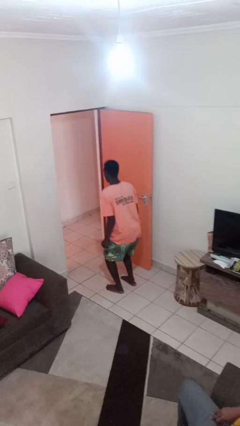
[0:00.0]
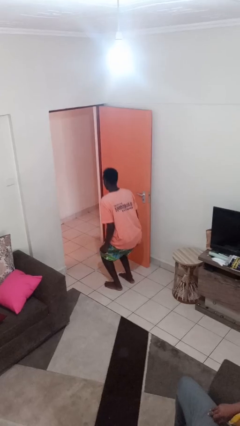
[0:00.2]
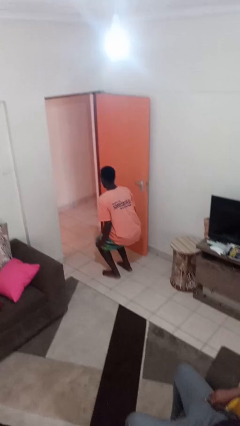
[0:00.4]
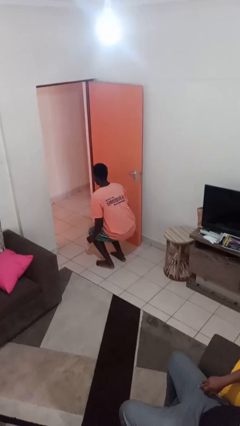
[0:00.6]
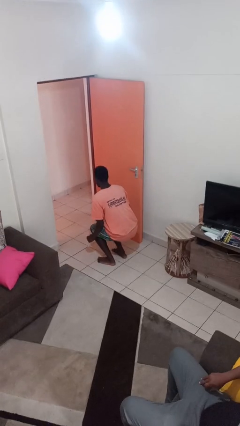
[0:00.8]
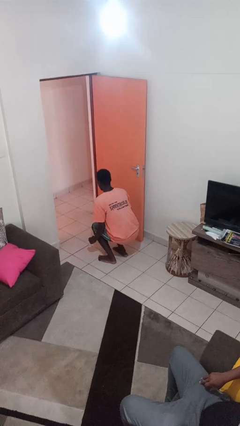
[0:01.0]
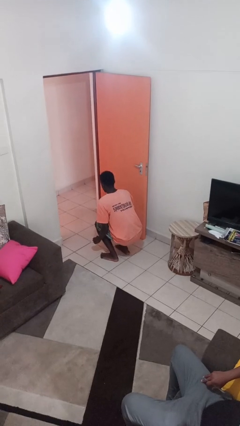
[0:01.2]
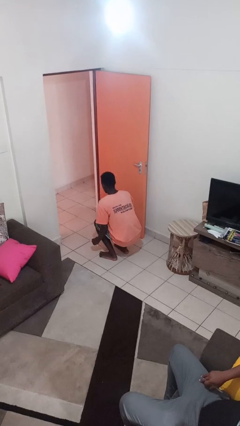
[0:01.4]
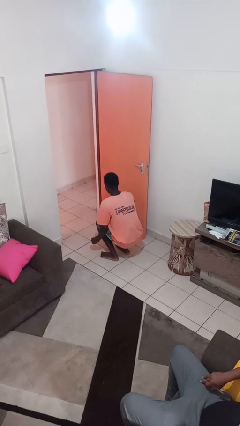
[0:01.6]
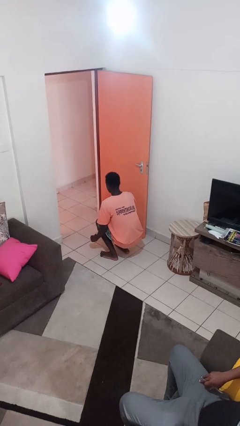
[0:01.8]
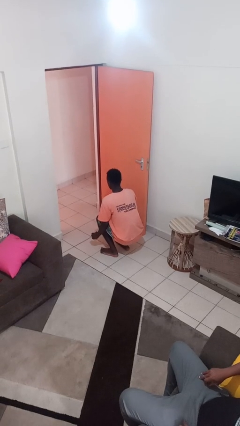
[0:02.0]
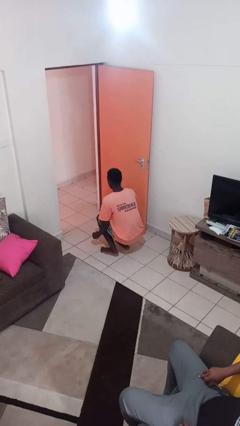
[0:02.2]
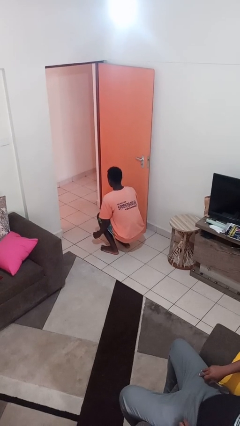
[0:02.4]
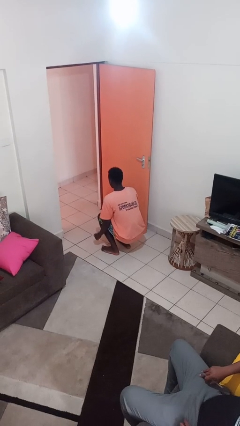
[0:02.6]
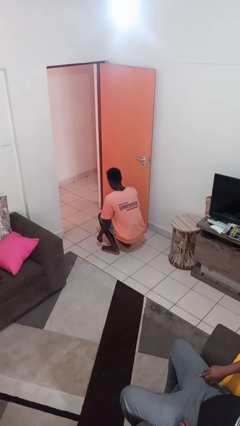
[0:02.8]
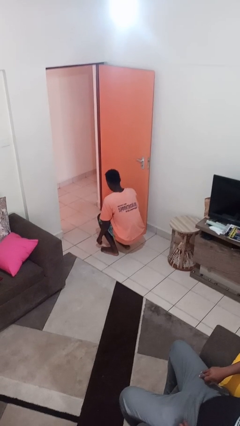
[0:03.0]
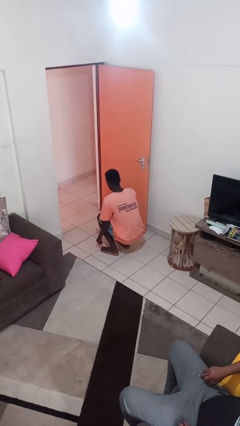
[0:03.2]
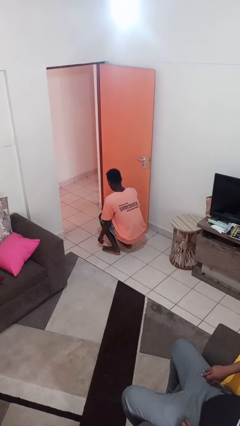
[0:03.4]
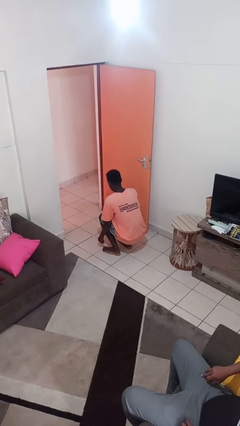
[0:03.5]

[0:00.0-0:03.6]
person squats

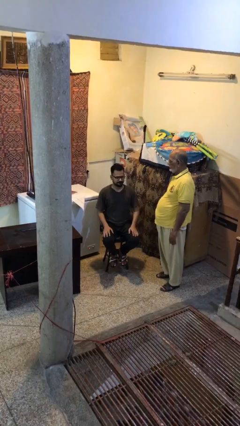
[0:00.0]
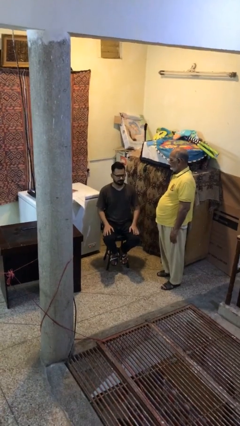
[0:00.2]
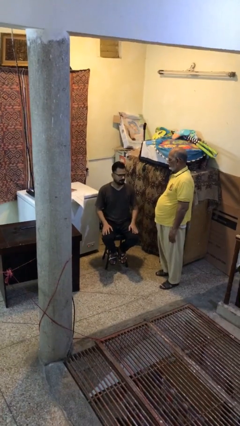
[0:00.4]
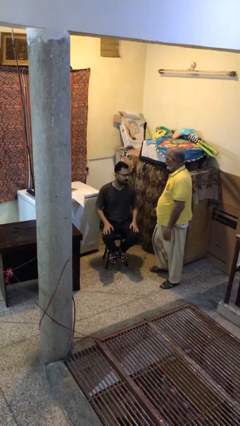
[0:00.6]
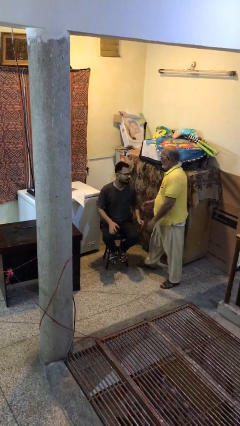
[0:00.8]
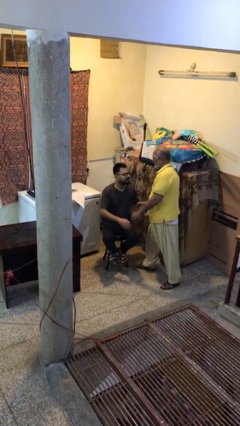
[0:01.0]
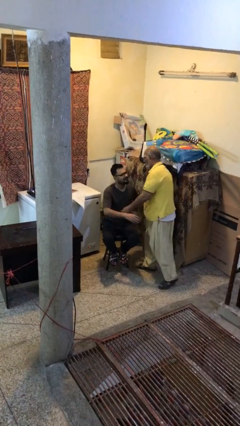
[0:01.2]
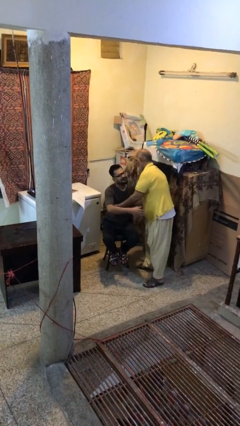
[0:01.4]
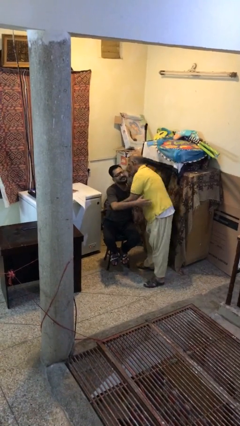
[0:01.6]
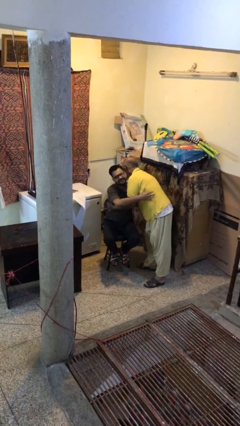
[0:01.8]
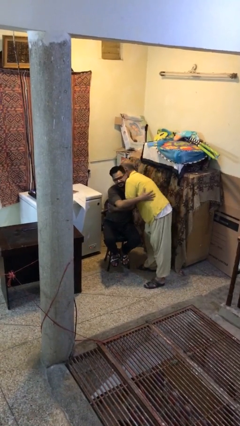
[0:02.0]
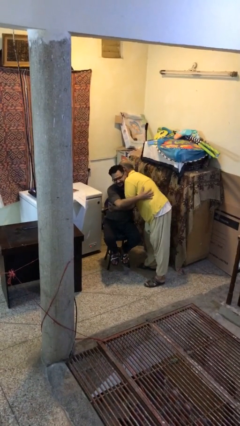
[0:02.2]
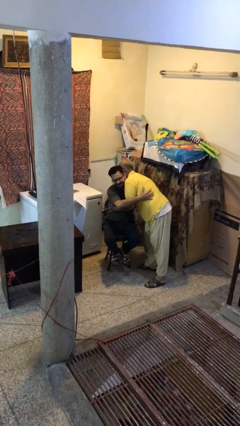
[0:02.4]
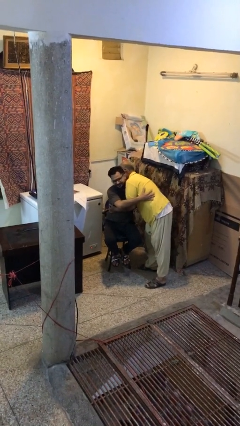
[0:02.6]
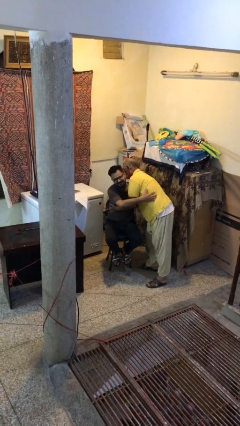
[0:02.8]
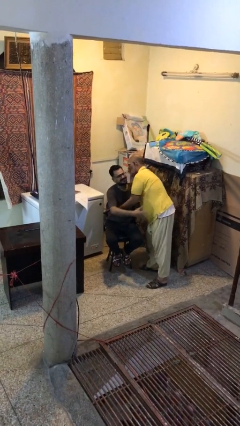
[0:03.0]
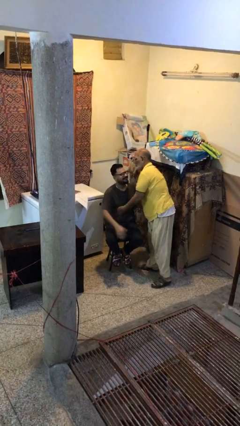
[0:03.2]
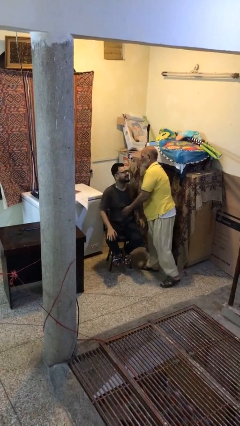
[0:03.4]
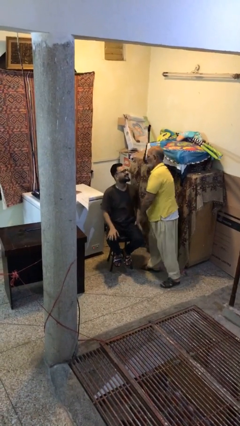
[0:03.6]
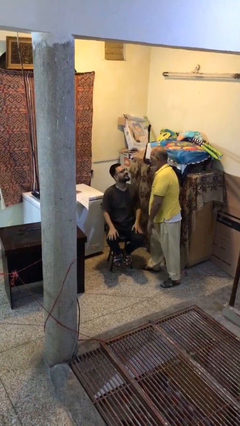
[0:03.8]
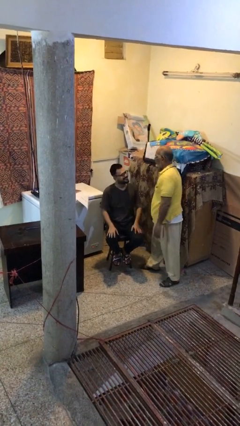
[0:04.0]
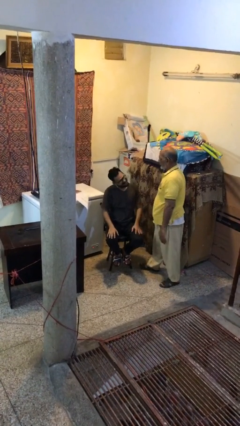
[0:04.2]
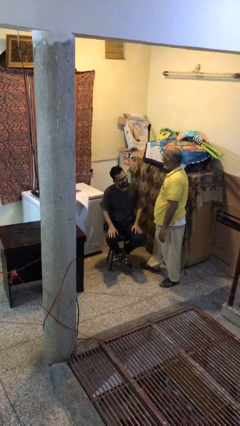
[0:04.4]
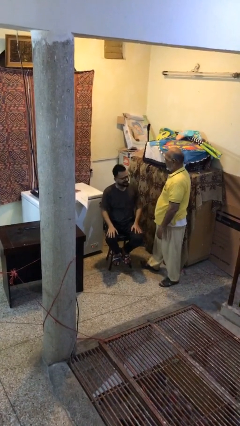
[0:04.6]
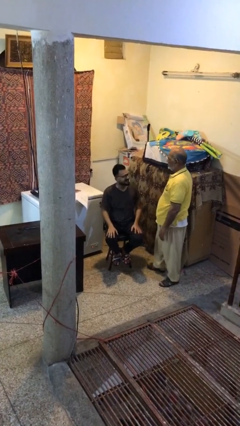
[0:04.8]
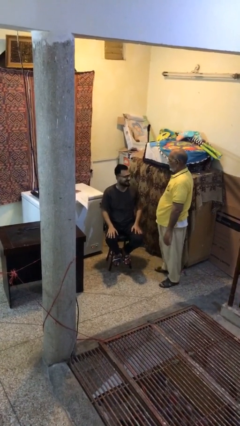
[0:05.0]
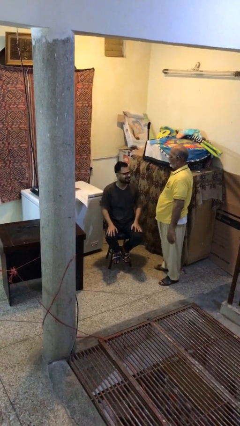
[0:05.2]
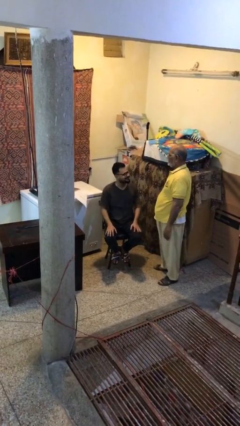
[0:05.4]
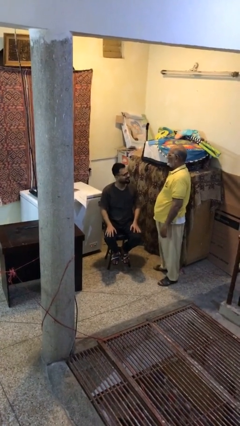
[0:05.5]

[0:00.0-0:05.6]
person embraces person

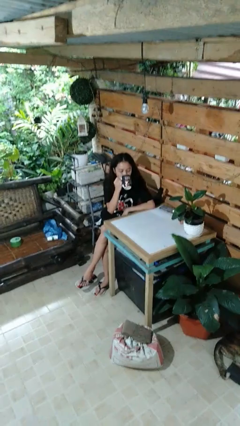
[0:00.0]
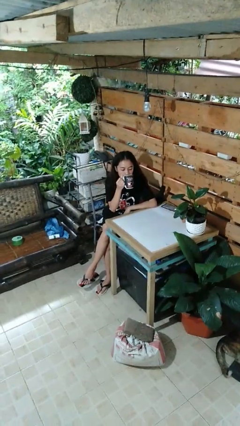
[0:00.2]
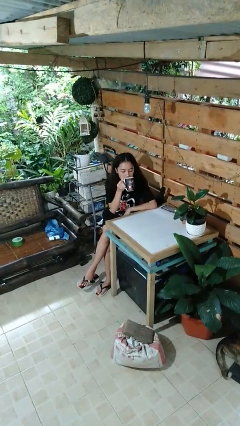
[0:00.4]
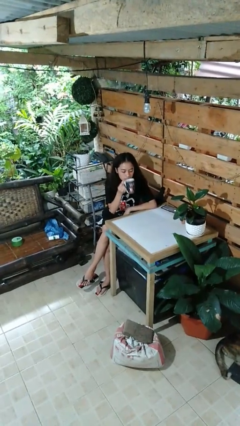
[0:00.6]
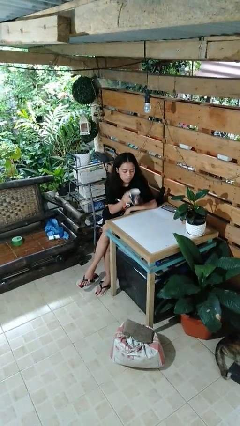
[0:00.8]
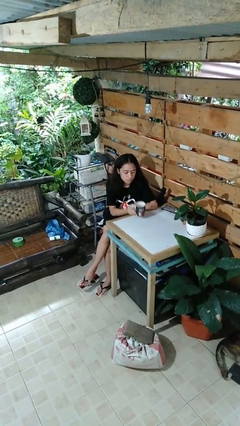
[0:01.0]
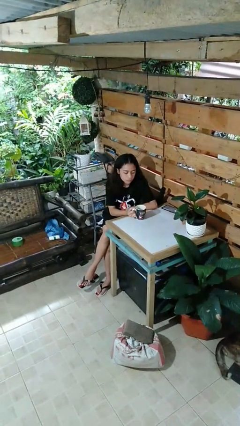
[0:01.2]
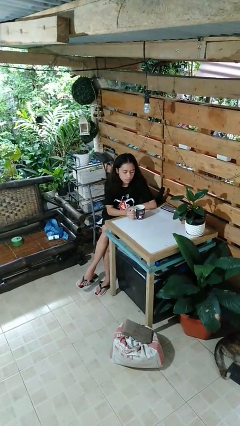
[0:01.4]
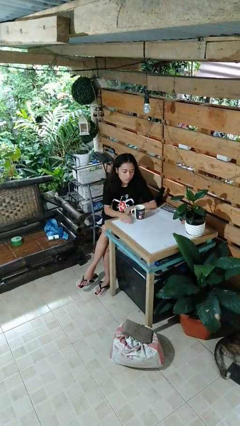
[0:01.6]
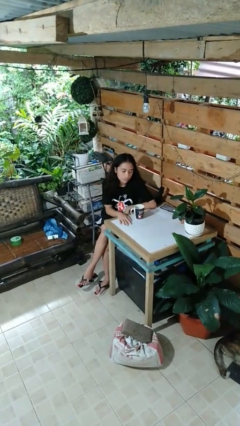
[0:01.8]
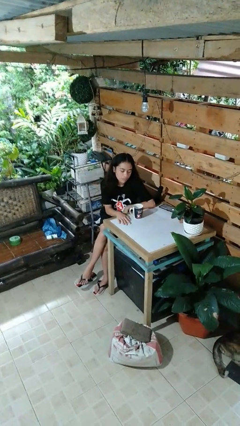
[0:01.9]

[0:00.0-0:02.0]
person puts down object on table

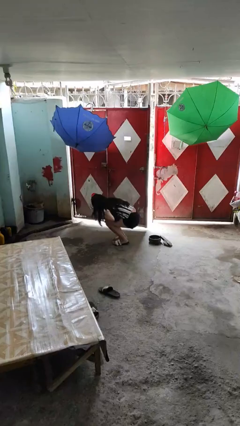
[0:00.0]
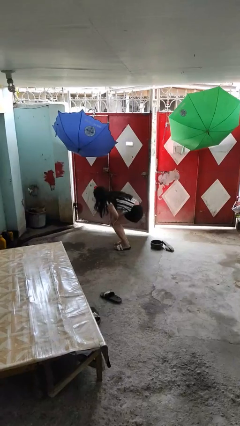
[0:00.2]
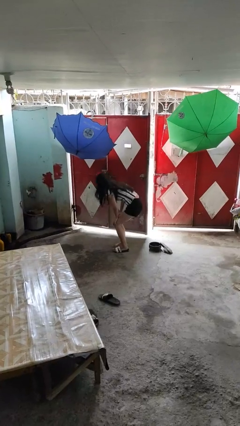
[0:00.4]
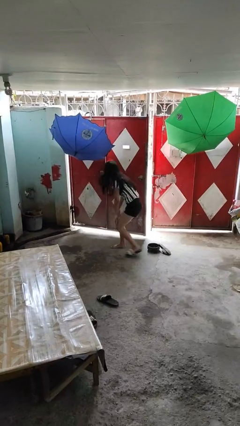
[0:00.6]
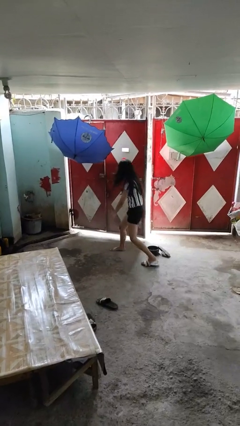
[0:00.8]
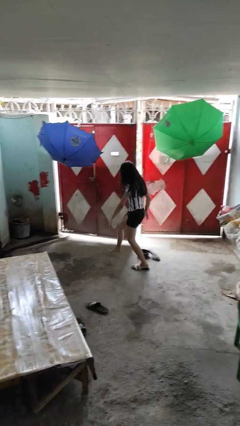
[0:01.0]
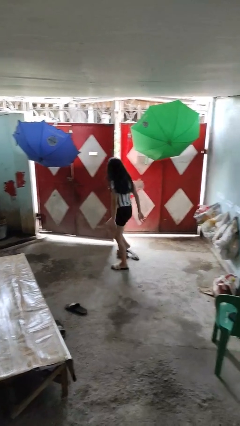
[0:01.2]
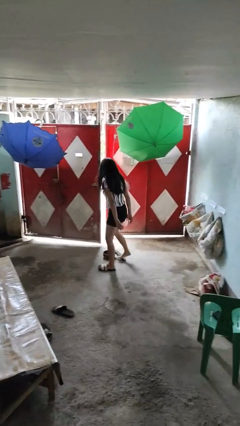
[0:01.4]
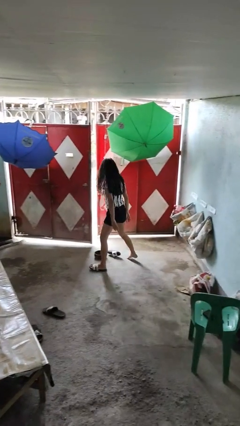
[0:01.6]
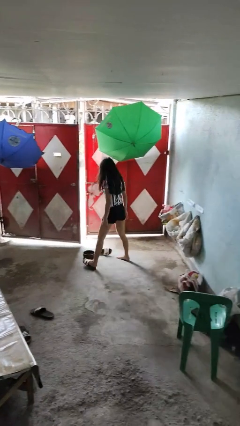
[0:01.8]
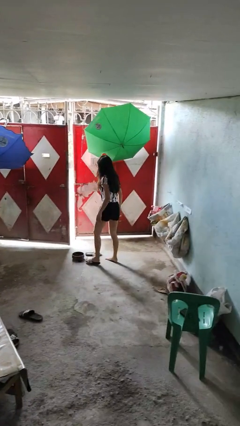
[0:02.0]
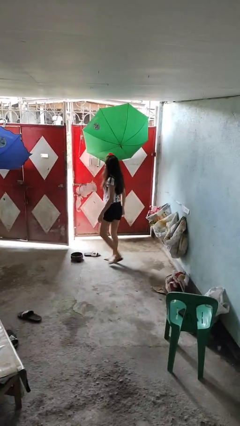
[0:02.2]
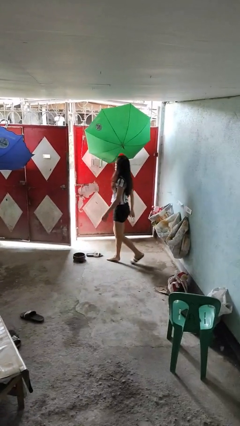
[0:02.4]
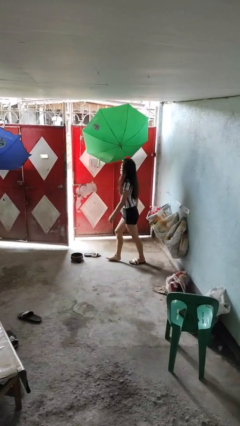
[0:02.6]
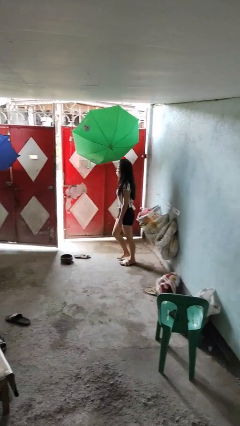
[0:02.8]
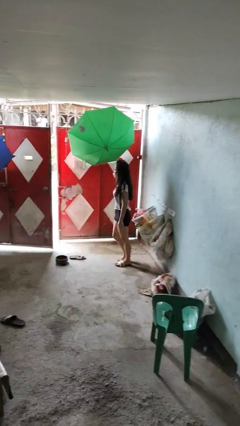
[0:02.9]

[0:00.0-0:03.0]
person stands up from floor

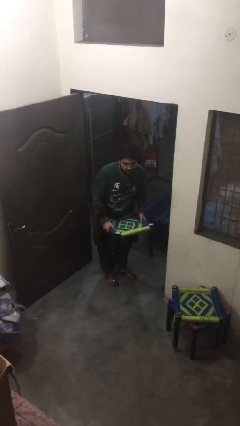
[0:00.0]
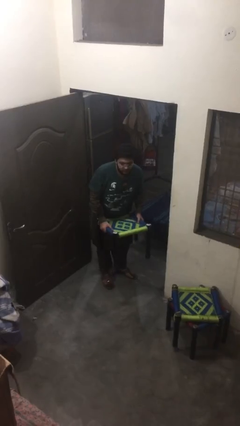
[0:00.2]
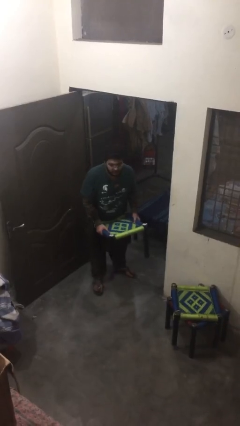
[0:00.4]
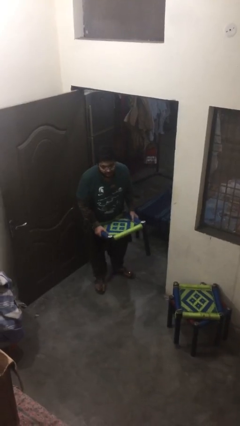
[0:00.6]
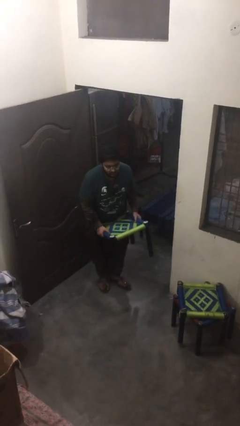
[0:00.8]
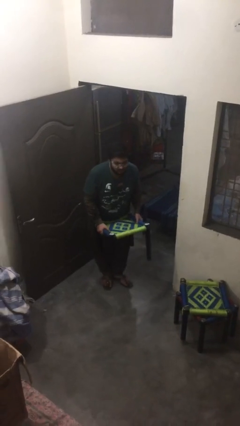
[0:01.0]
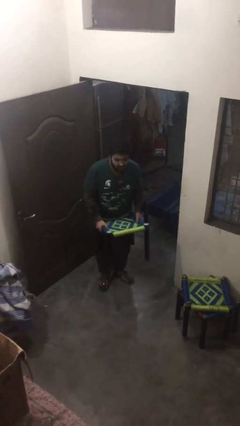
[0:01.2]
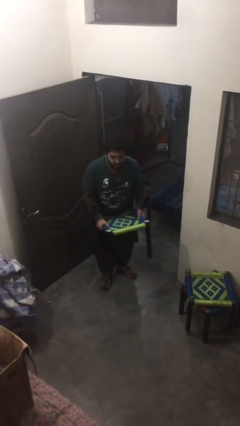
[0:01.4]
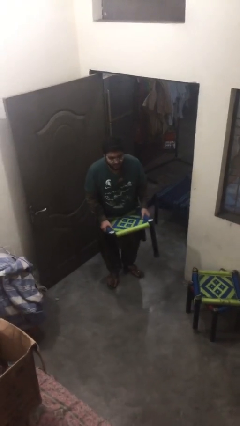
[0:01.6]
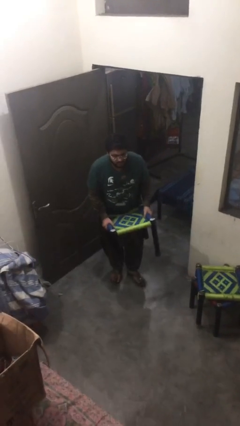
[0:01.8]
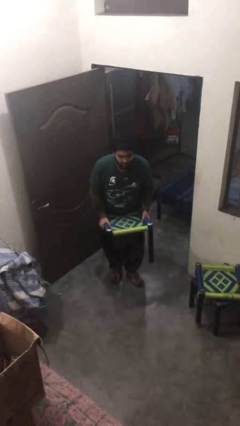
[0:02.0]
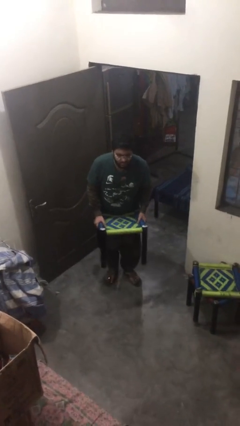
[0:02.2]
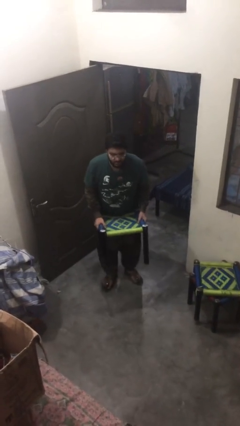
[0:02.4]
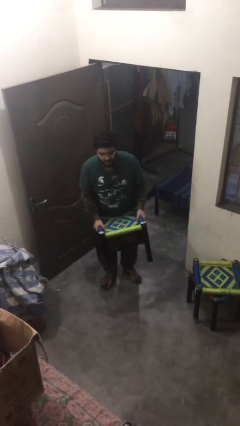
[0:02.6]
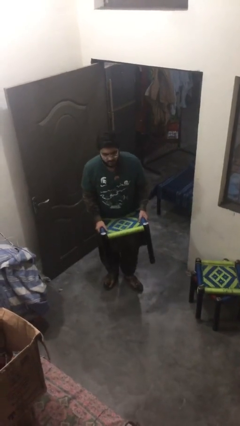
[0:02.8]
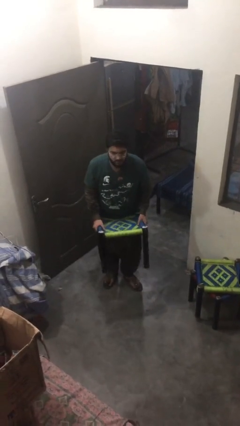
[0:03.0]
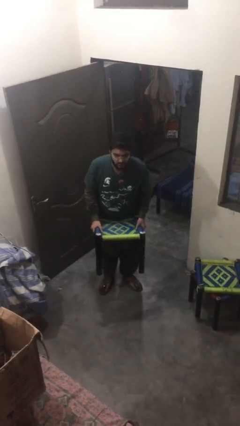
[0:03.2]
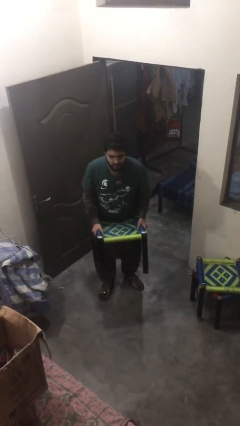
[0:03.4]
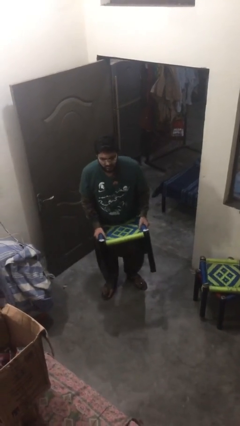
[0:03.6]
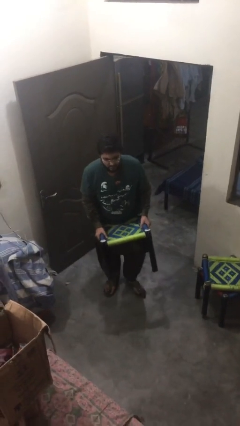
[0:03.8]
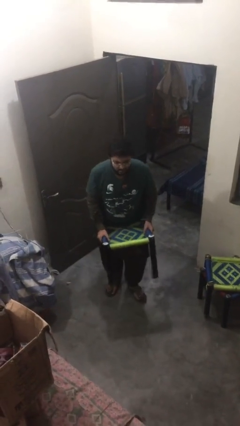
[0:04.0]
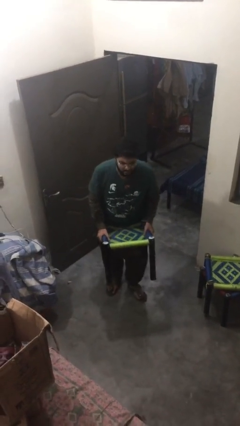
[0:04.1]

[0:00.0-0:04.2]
person carries heavy object
